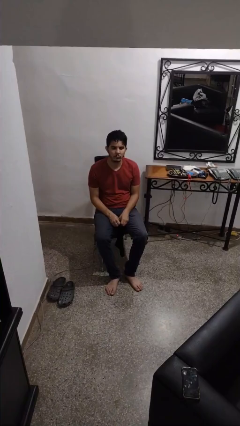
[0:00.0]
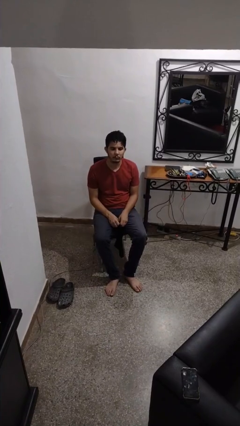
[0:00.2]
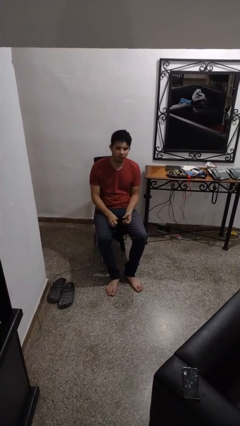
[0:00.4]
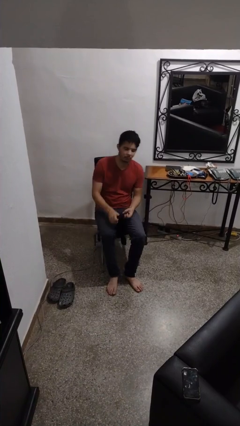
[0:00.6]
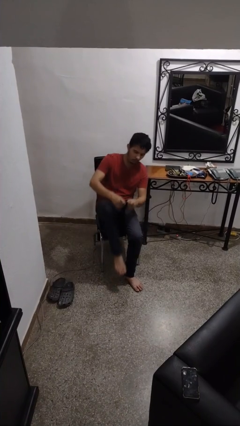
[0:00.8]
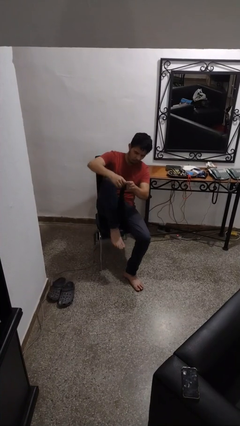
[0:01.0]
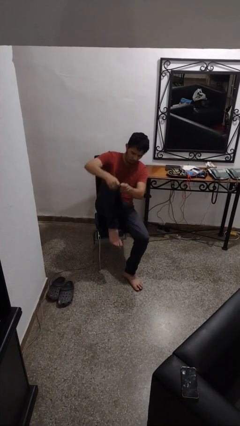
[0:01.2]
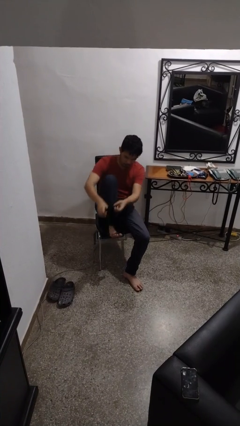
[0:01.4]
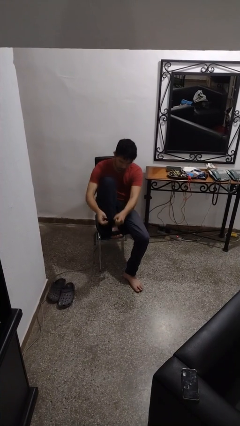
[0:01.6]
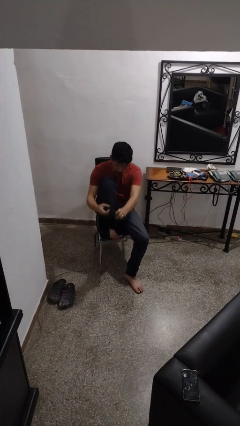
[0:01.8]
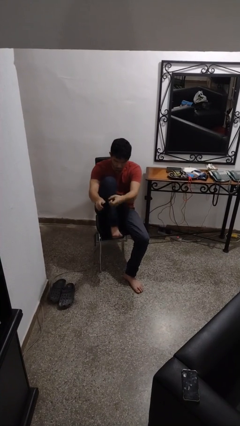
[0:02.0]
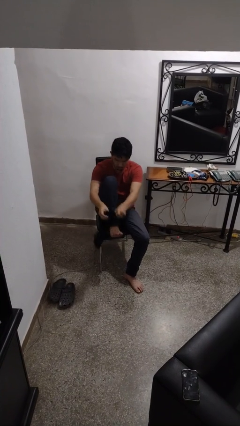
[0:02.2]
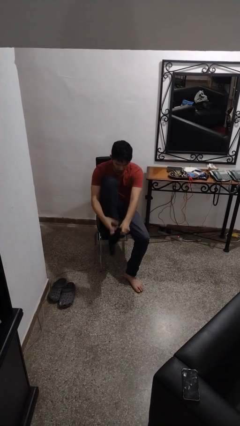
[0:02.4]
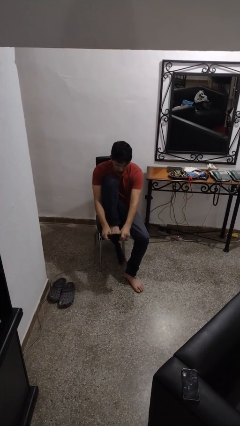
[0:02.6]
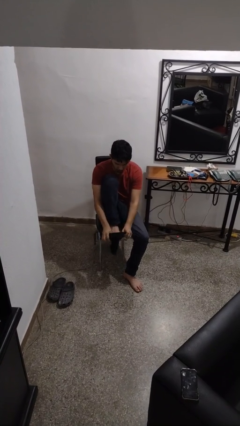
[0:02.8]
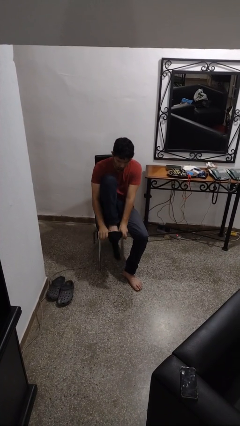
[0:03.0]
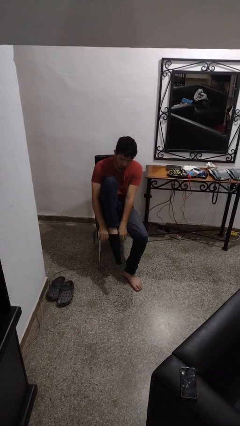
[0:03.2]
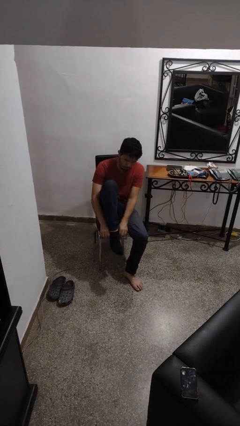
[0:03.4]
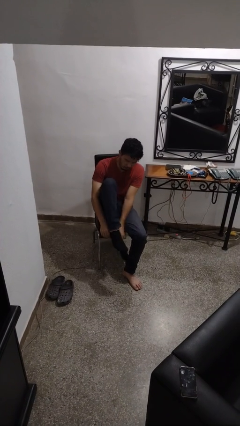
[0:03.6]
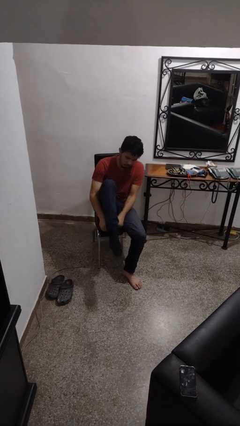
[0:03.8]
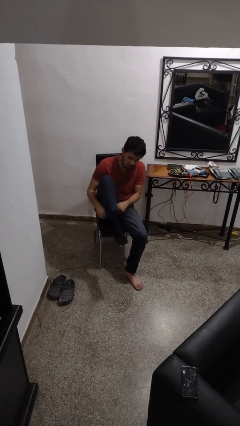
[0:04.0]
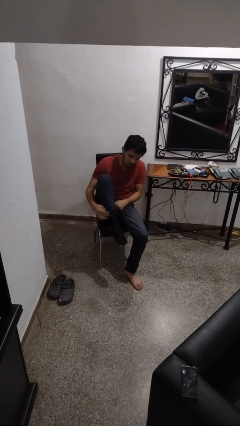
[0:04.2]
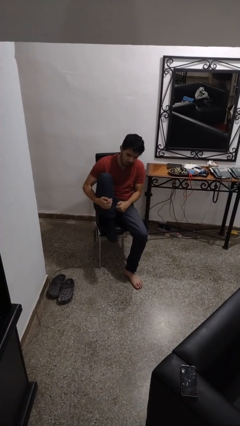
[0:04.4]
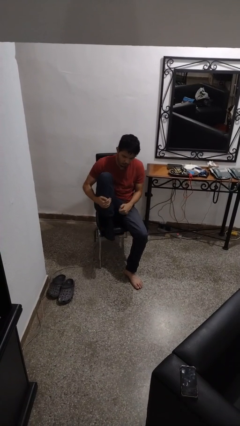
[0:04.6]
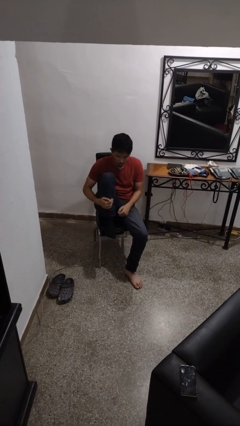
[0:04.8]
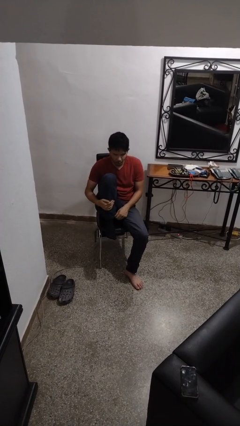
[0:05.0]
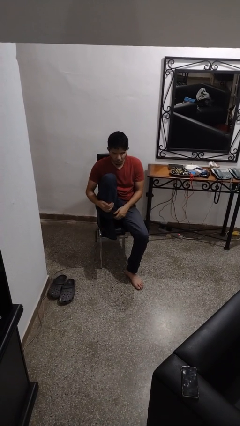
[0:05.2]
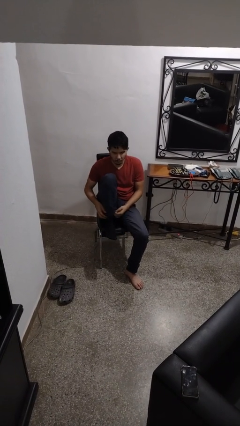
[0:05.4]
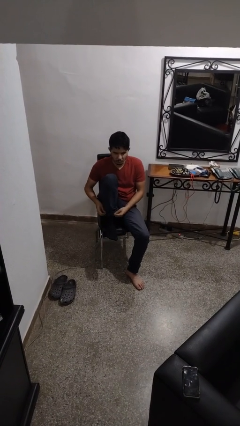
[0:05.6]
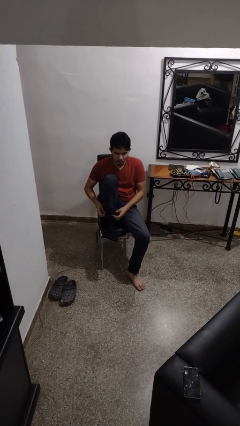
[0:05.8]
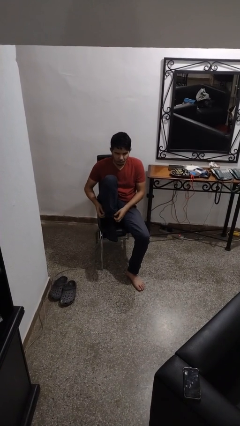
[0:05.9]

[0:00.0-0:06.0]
person puts on socks

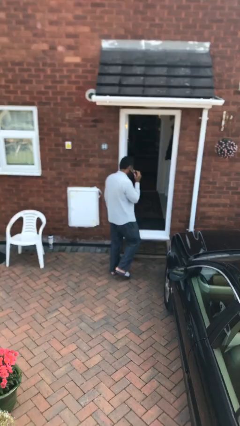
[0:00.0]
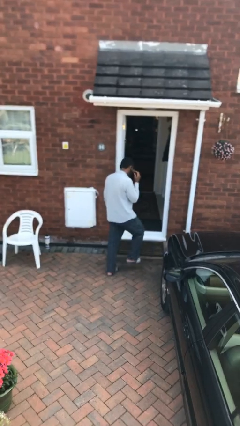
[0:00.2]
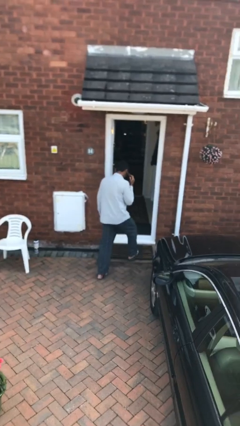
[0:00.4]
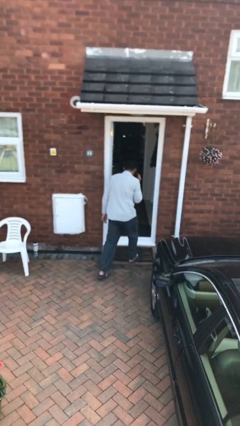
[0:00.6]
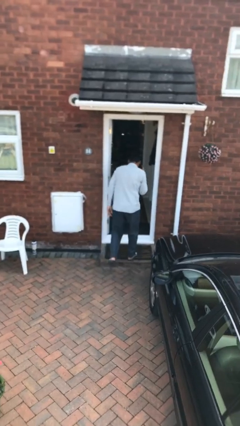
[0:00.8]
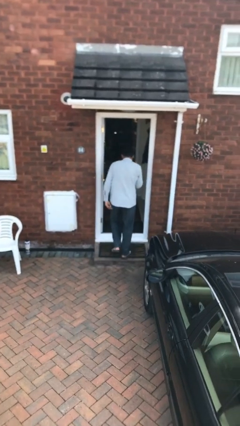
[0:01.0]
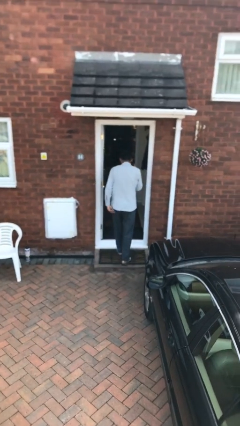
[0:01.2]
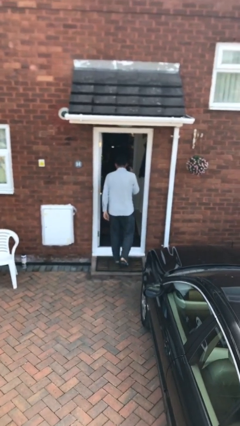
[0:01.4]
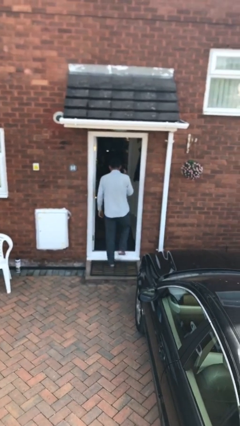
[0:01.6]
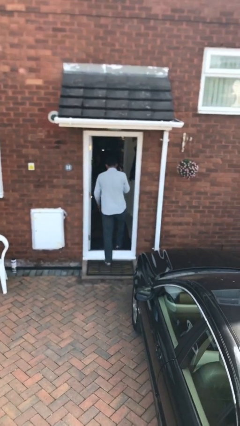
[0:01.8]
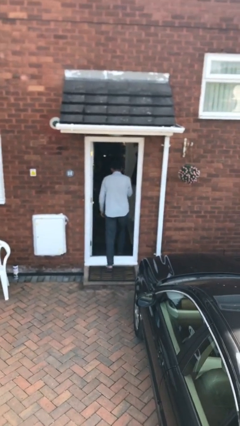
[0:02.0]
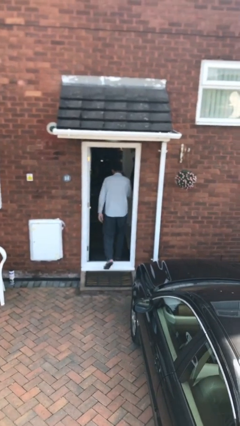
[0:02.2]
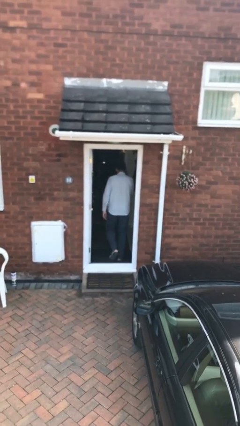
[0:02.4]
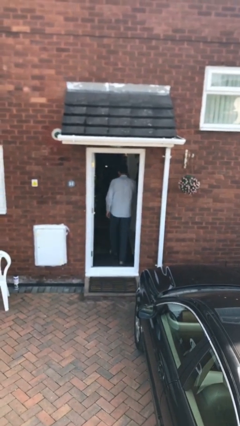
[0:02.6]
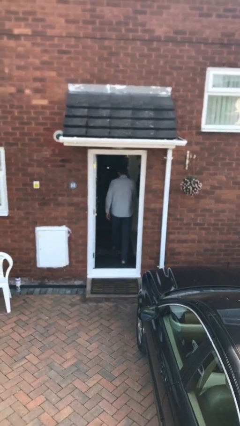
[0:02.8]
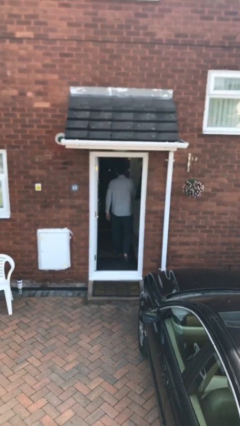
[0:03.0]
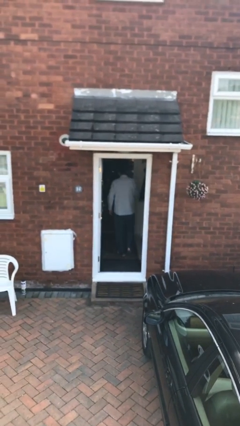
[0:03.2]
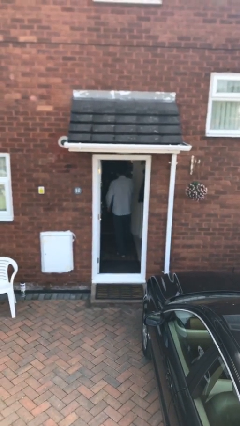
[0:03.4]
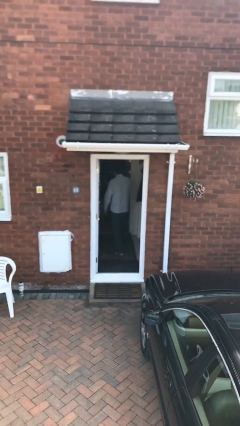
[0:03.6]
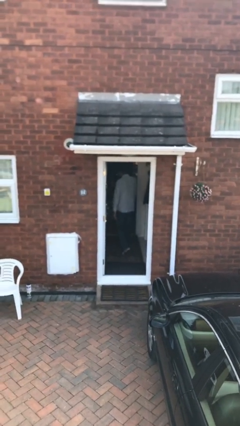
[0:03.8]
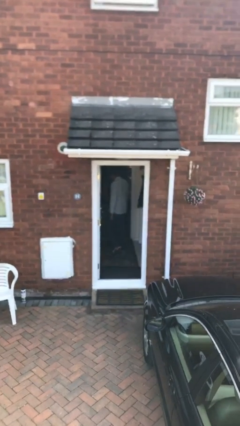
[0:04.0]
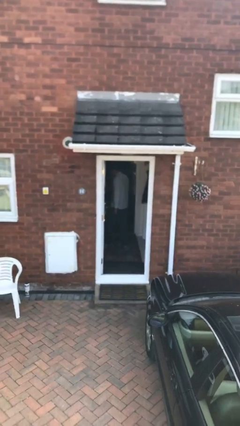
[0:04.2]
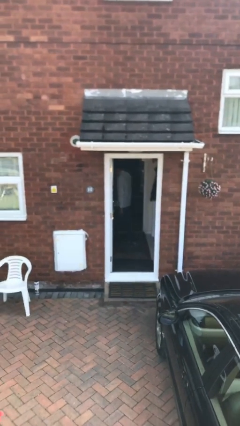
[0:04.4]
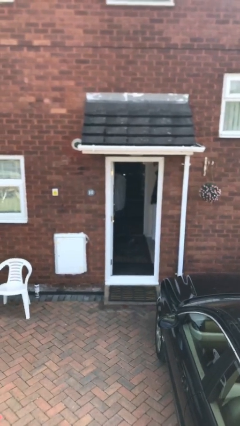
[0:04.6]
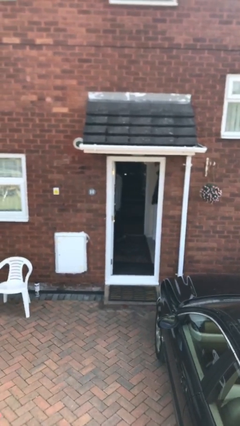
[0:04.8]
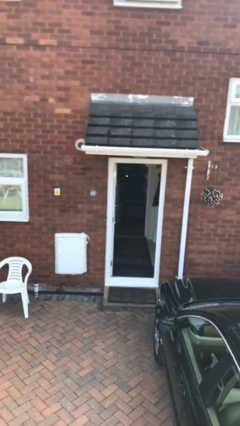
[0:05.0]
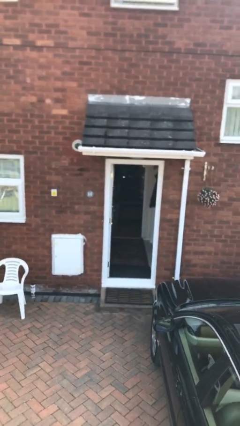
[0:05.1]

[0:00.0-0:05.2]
person exits scene through structure

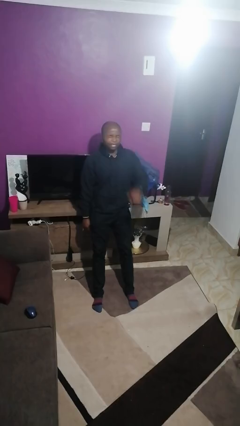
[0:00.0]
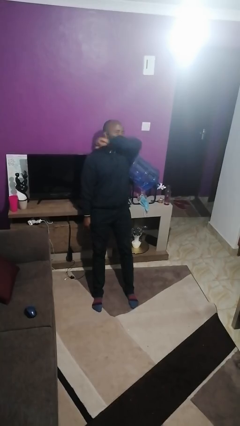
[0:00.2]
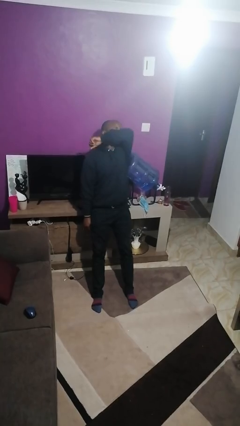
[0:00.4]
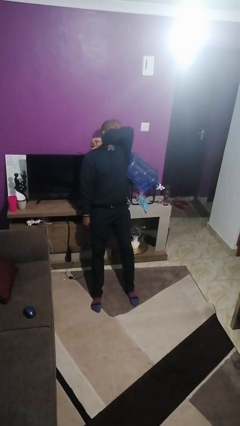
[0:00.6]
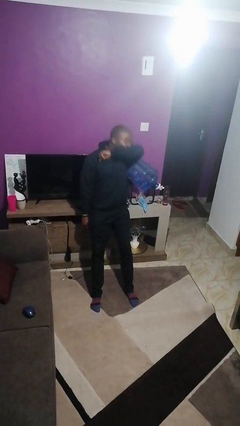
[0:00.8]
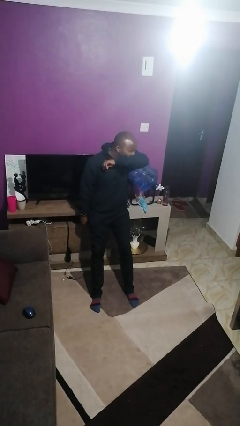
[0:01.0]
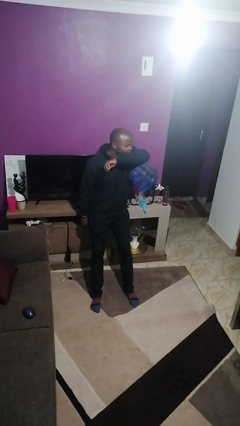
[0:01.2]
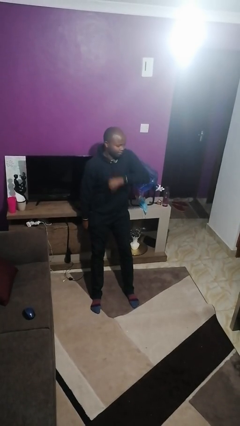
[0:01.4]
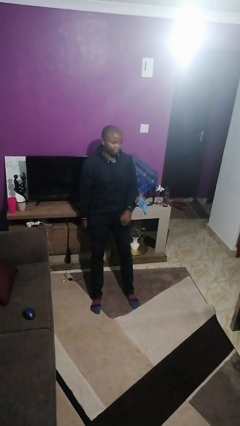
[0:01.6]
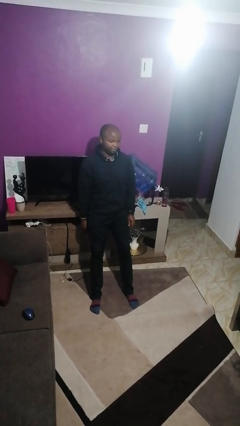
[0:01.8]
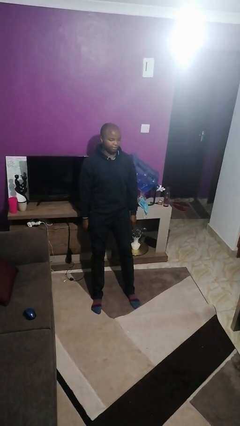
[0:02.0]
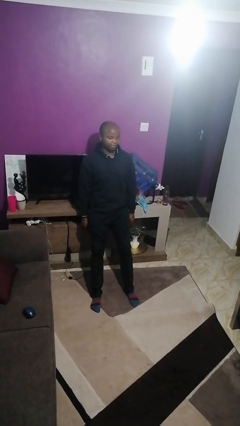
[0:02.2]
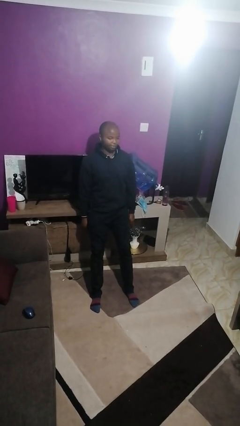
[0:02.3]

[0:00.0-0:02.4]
person sneezes into hand

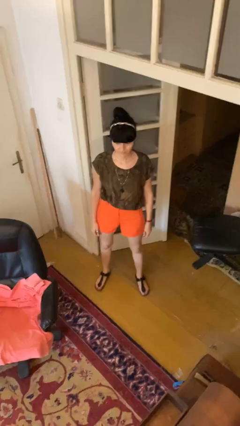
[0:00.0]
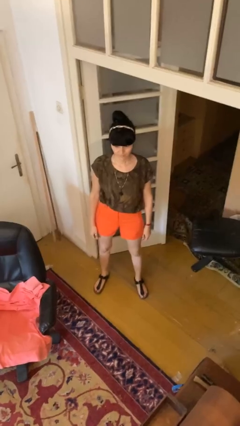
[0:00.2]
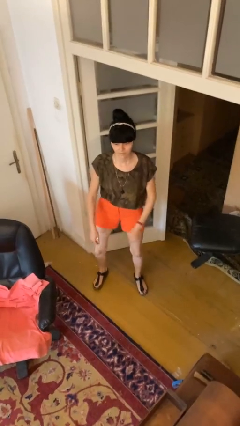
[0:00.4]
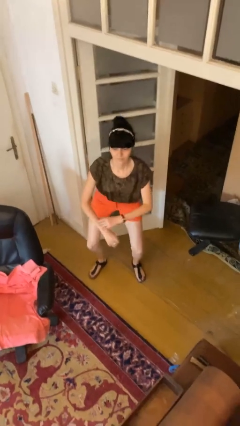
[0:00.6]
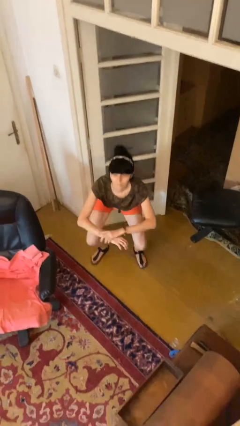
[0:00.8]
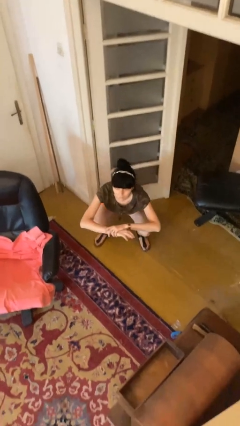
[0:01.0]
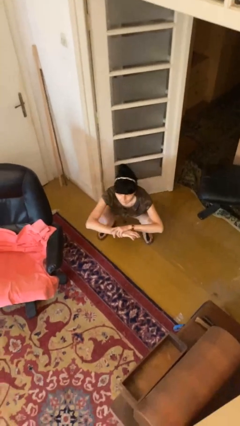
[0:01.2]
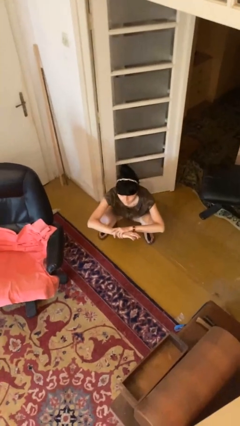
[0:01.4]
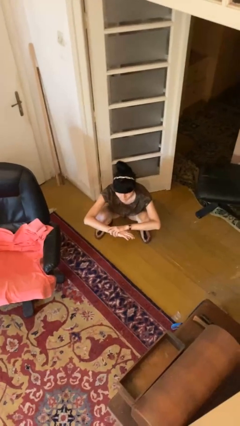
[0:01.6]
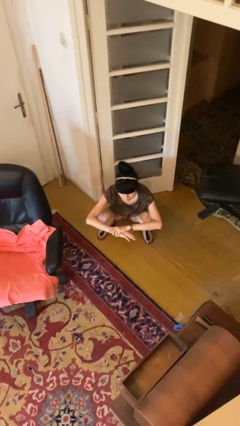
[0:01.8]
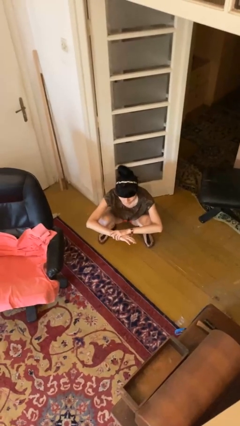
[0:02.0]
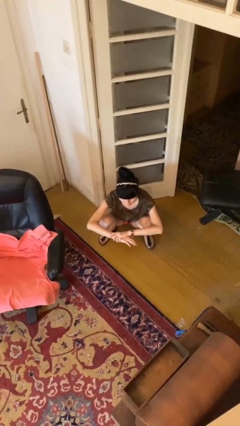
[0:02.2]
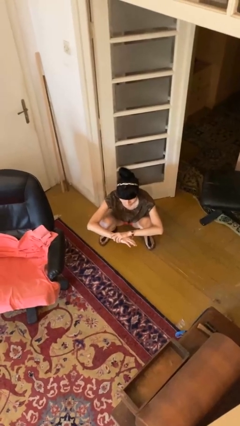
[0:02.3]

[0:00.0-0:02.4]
person squats

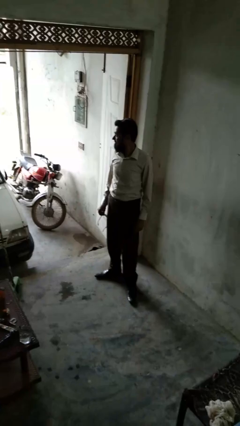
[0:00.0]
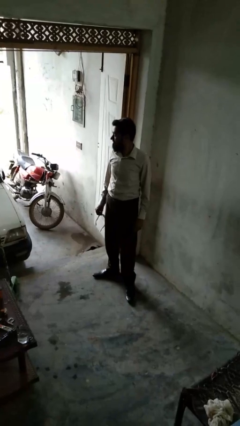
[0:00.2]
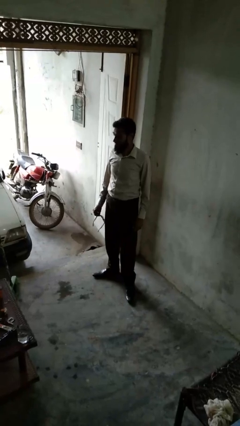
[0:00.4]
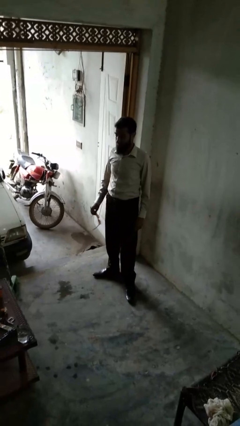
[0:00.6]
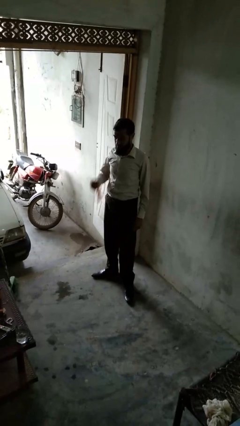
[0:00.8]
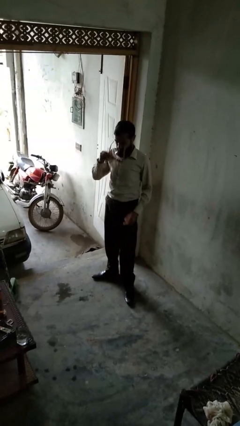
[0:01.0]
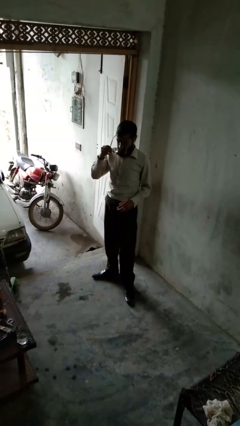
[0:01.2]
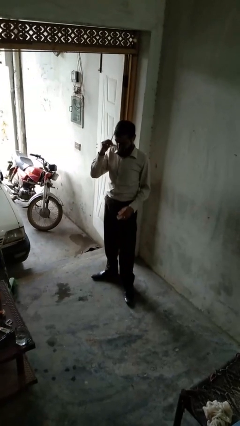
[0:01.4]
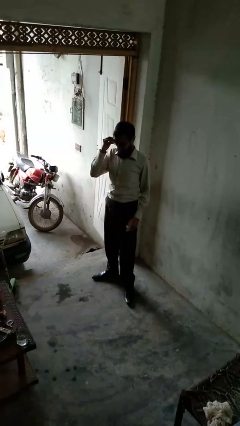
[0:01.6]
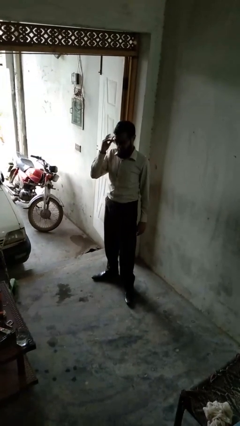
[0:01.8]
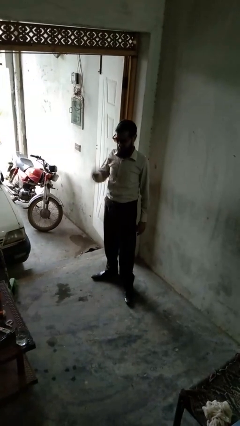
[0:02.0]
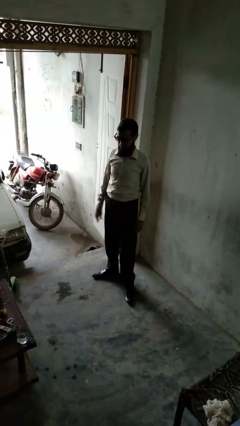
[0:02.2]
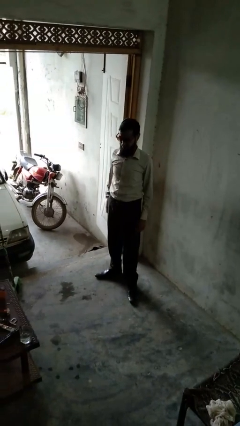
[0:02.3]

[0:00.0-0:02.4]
person puts on sunglasses
